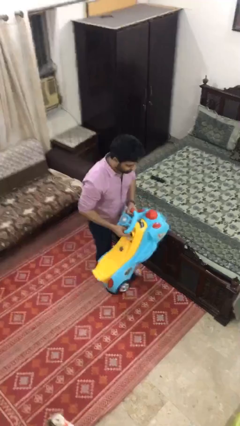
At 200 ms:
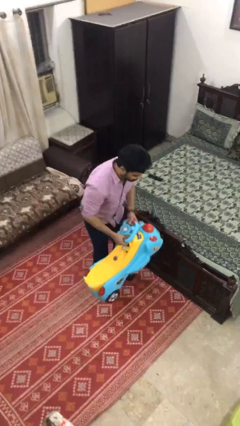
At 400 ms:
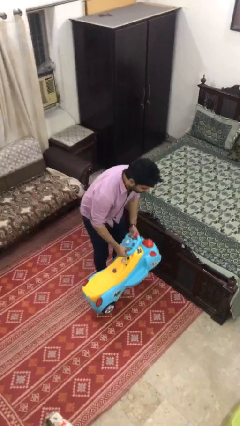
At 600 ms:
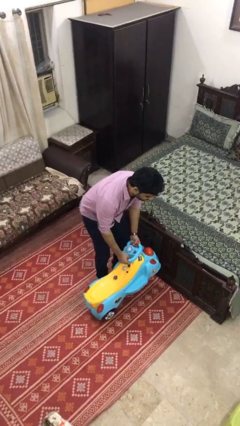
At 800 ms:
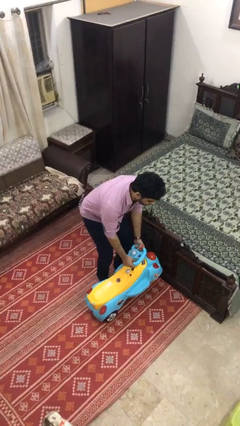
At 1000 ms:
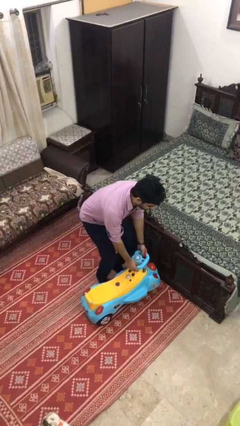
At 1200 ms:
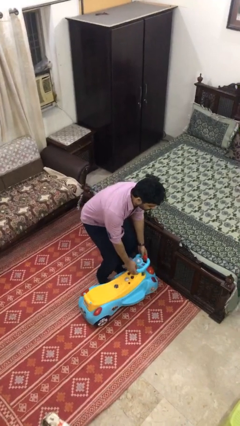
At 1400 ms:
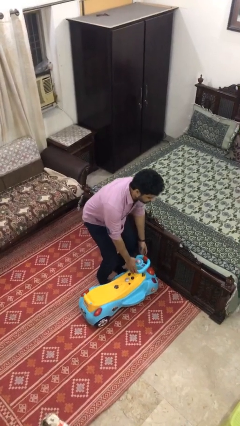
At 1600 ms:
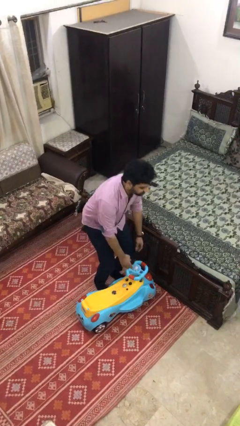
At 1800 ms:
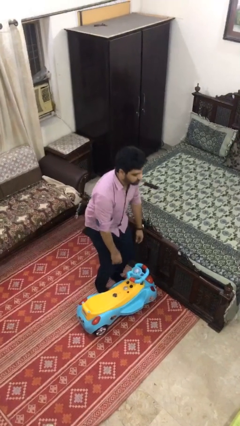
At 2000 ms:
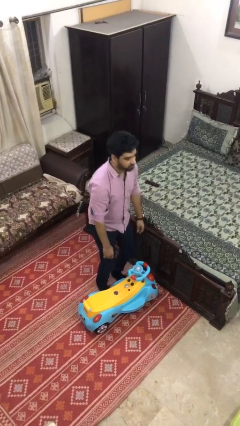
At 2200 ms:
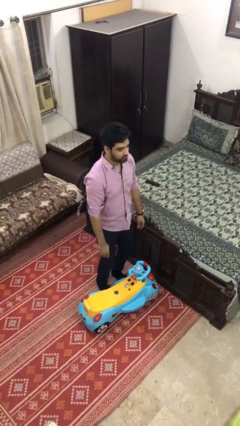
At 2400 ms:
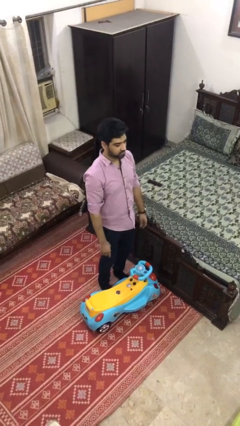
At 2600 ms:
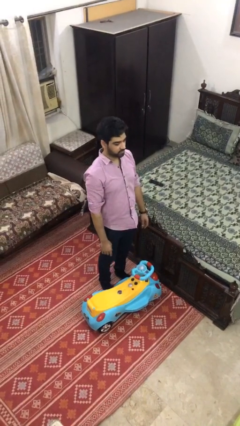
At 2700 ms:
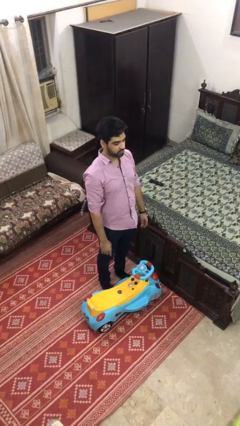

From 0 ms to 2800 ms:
person puts down object on floor

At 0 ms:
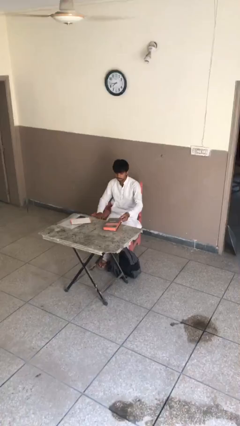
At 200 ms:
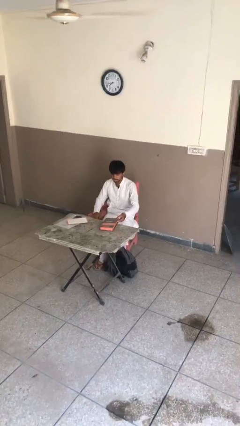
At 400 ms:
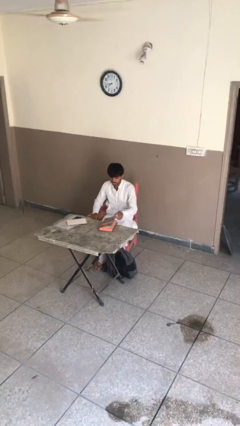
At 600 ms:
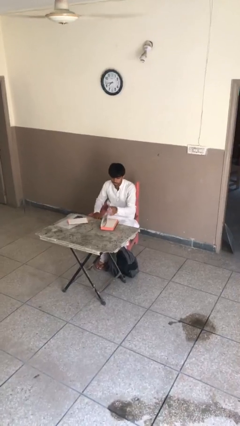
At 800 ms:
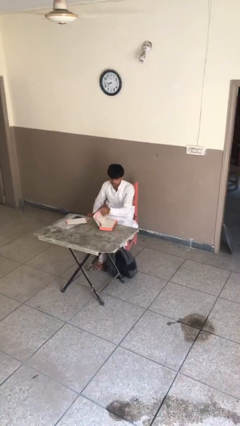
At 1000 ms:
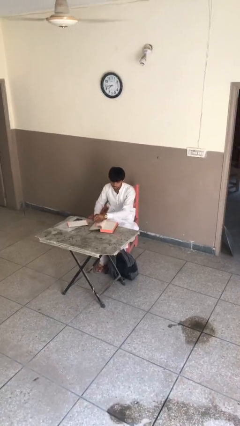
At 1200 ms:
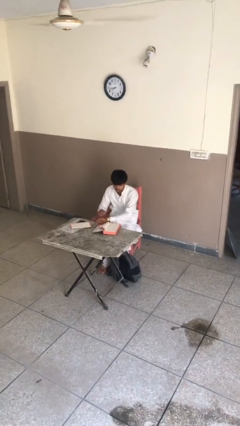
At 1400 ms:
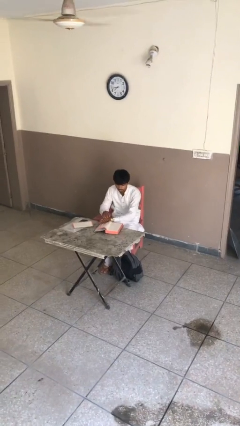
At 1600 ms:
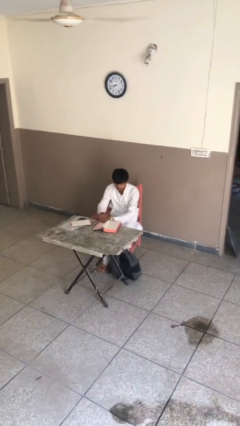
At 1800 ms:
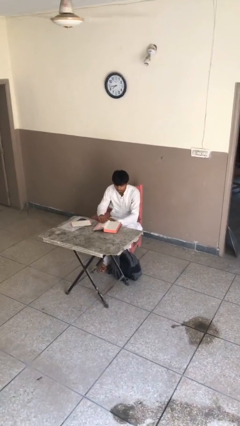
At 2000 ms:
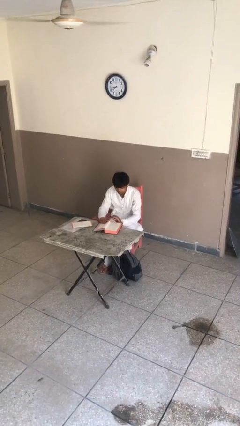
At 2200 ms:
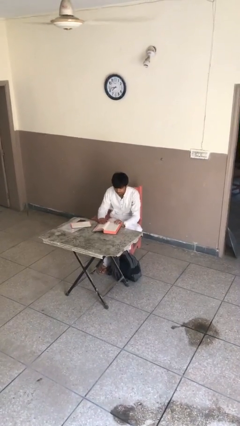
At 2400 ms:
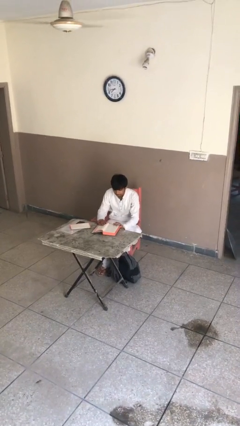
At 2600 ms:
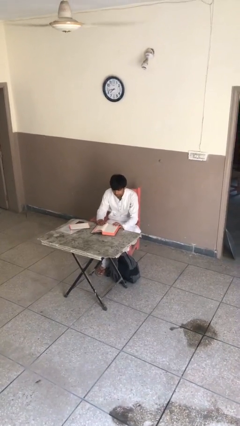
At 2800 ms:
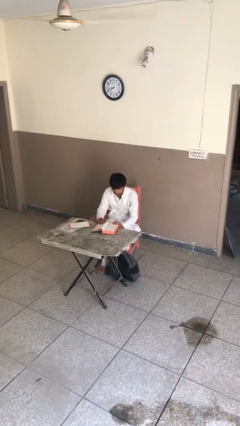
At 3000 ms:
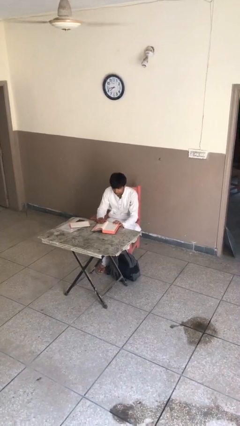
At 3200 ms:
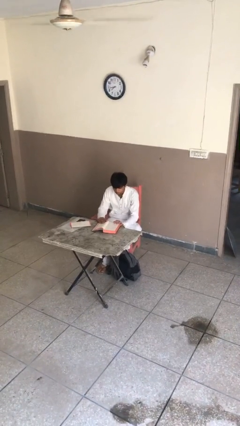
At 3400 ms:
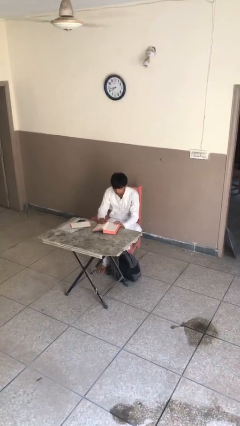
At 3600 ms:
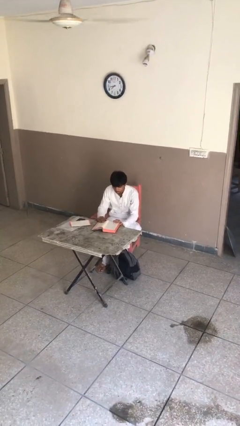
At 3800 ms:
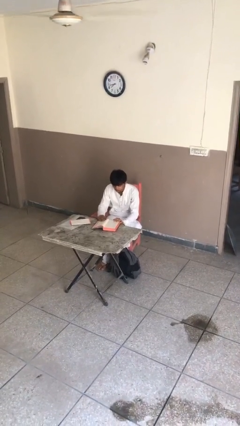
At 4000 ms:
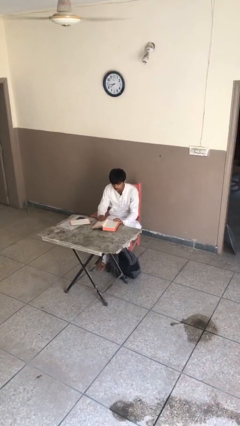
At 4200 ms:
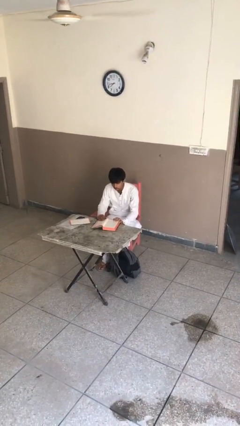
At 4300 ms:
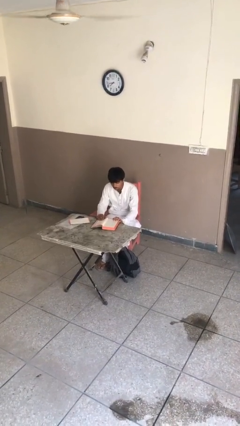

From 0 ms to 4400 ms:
person reads document

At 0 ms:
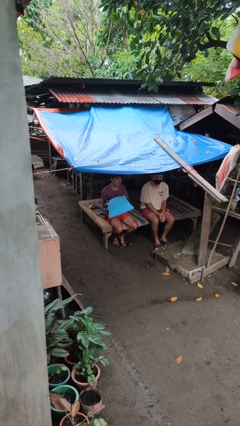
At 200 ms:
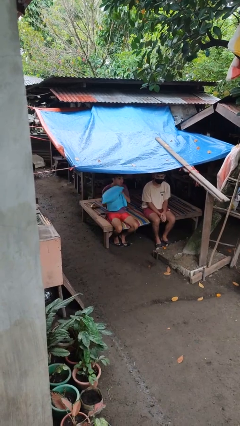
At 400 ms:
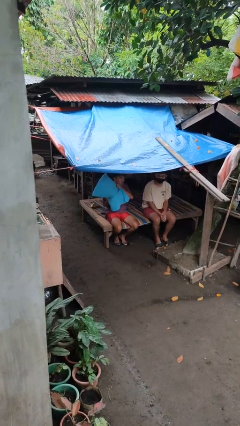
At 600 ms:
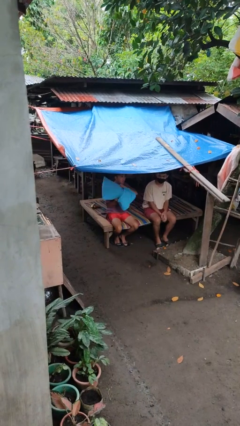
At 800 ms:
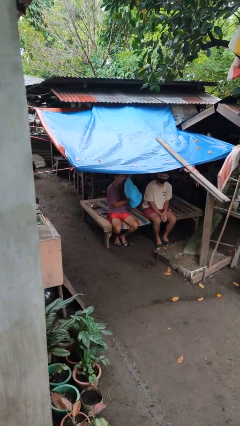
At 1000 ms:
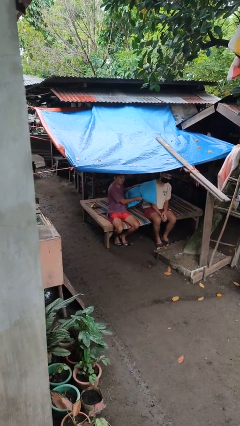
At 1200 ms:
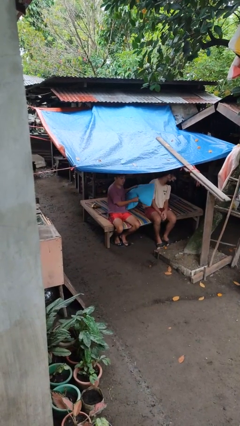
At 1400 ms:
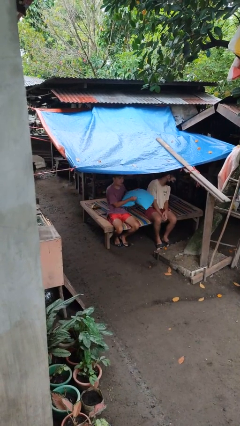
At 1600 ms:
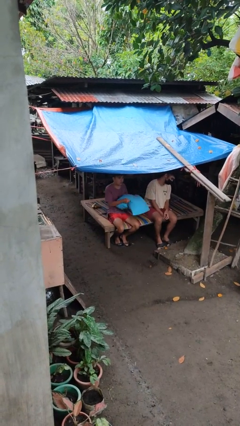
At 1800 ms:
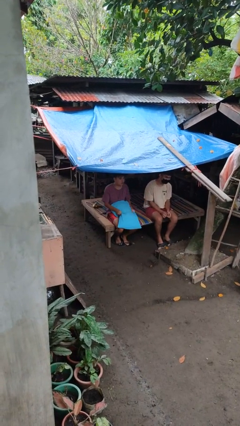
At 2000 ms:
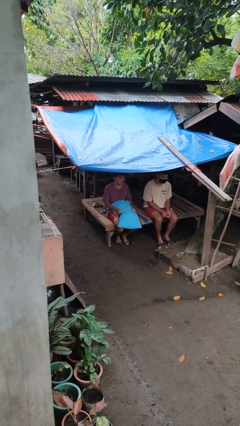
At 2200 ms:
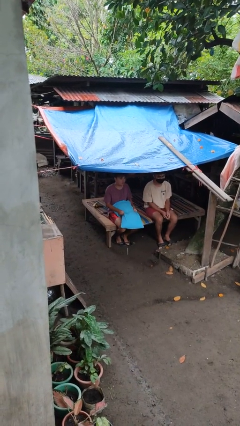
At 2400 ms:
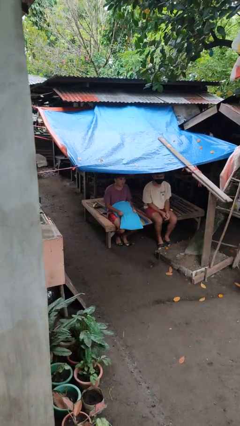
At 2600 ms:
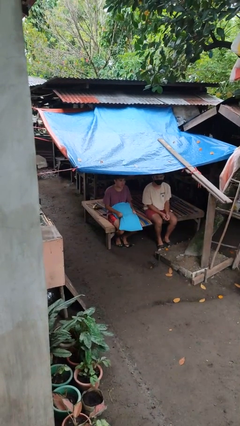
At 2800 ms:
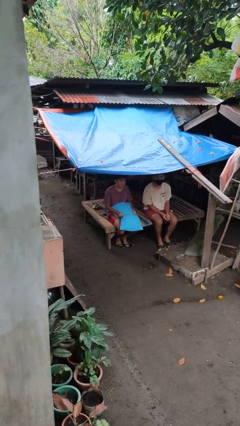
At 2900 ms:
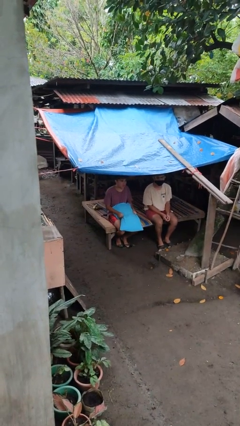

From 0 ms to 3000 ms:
person hits person with pillow

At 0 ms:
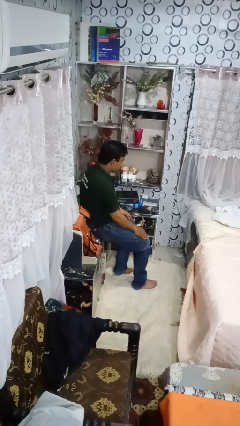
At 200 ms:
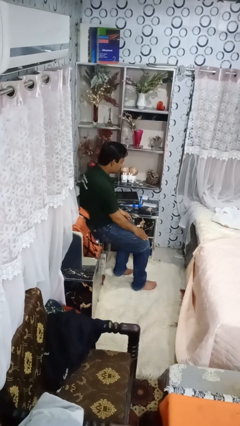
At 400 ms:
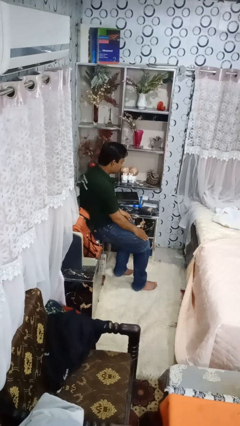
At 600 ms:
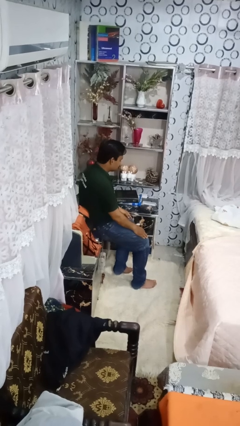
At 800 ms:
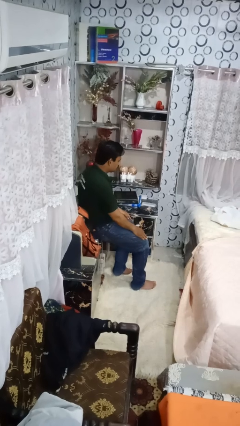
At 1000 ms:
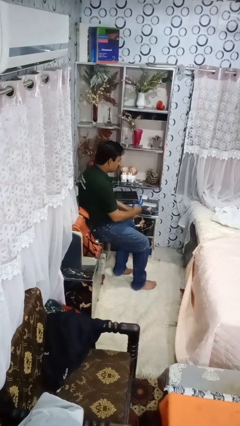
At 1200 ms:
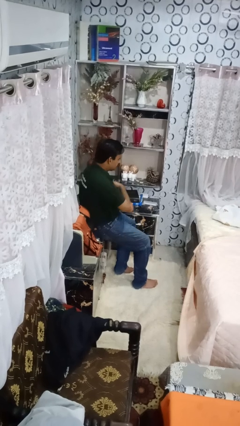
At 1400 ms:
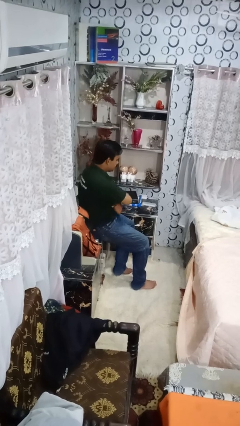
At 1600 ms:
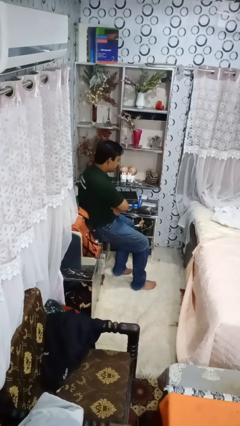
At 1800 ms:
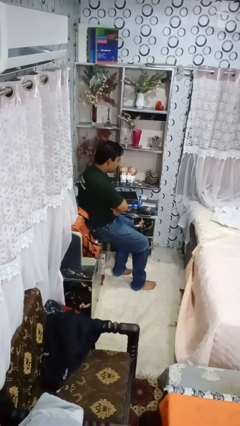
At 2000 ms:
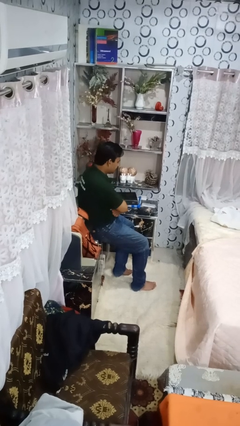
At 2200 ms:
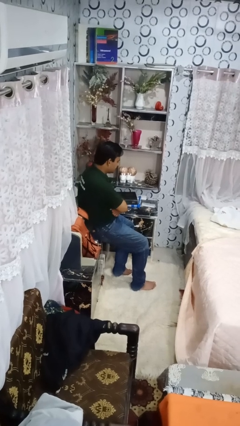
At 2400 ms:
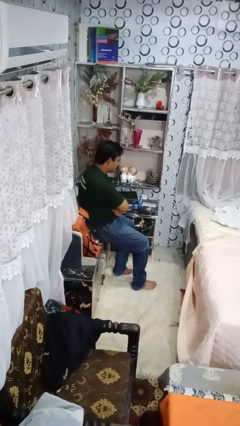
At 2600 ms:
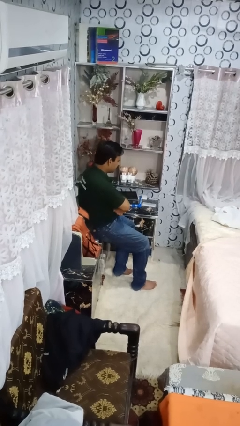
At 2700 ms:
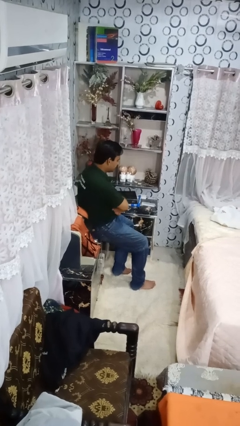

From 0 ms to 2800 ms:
person crosses arms

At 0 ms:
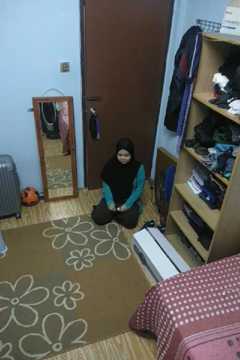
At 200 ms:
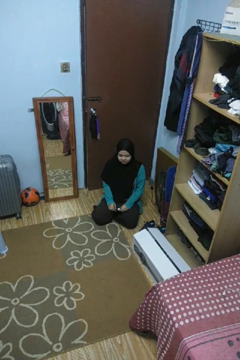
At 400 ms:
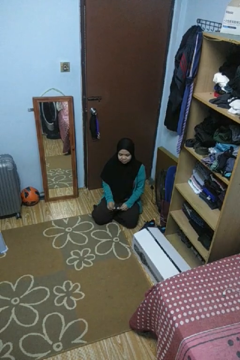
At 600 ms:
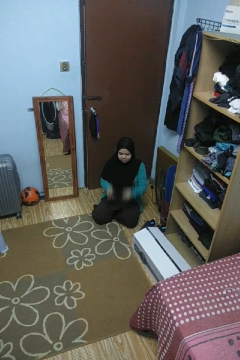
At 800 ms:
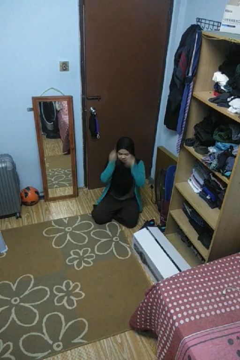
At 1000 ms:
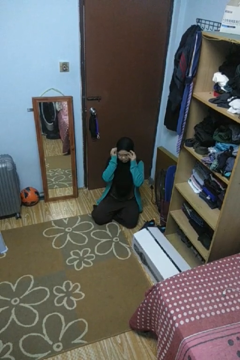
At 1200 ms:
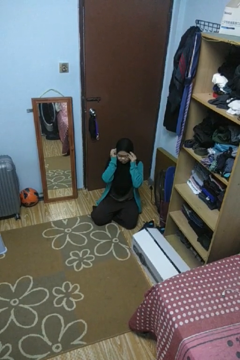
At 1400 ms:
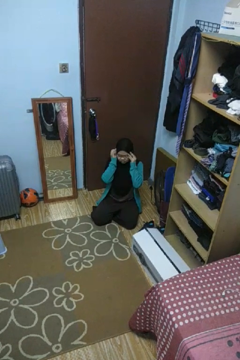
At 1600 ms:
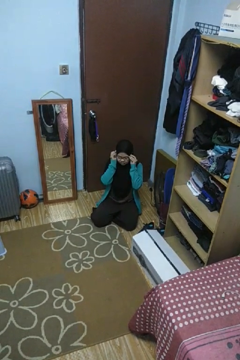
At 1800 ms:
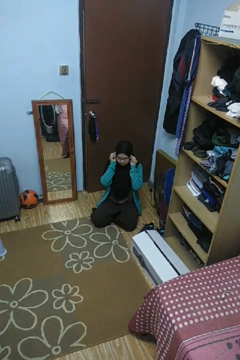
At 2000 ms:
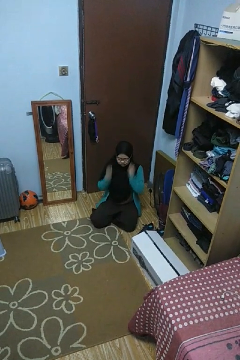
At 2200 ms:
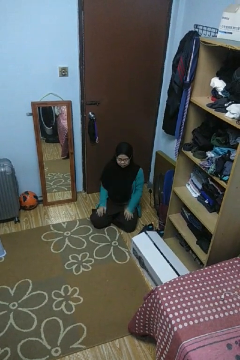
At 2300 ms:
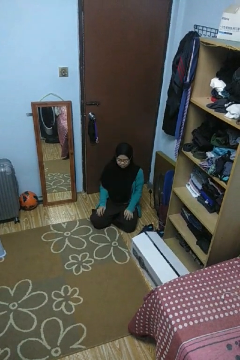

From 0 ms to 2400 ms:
person puts on glasses

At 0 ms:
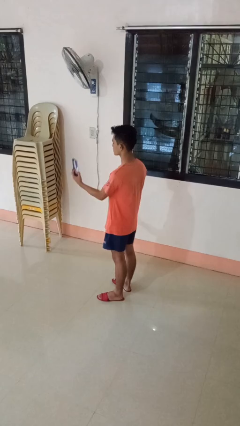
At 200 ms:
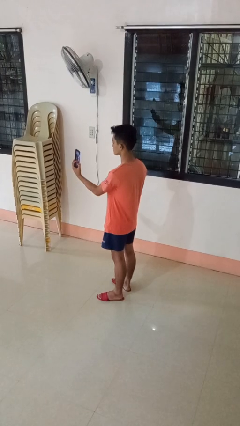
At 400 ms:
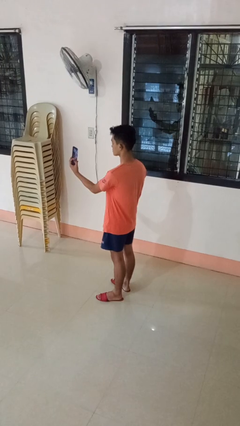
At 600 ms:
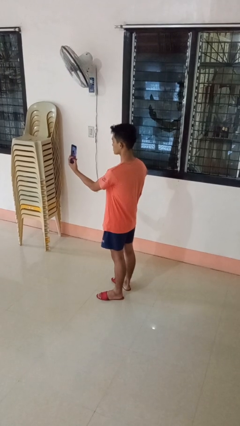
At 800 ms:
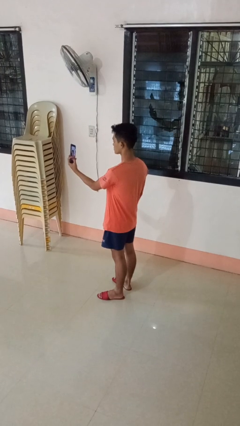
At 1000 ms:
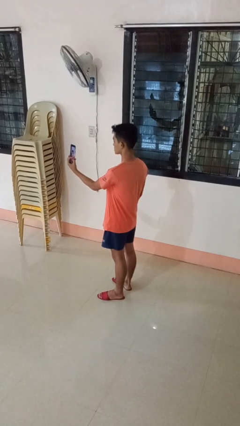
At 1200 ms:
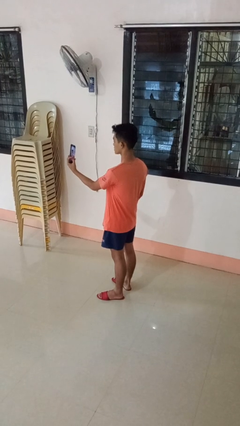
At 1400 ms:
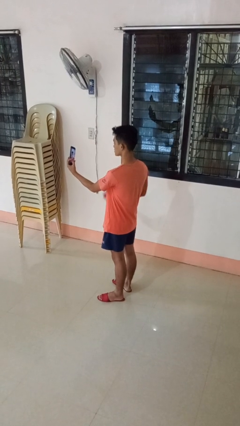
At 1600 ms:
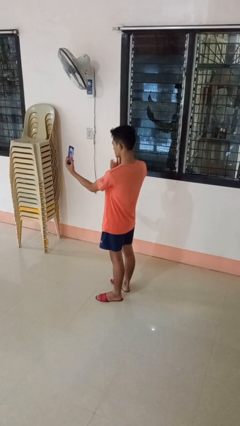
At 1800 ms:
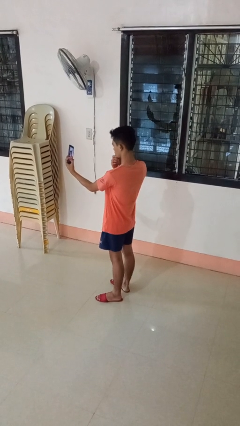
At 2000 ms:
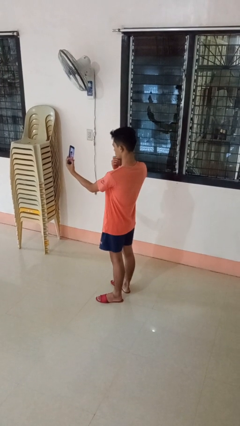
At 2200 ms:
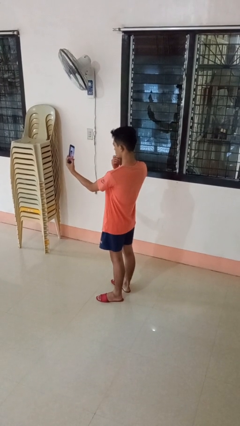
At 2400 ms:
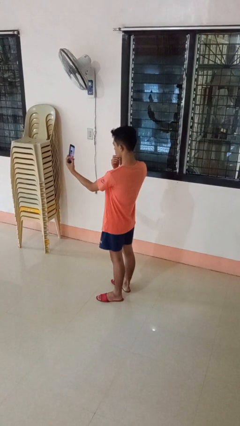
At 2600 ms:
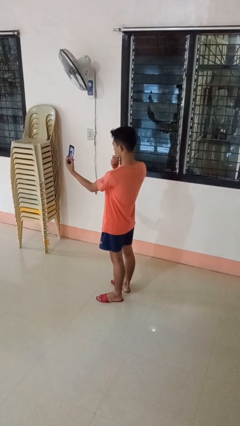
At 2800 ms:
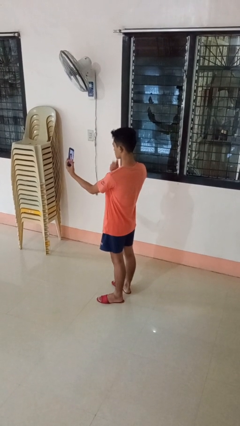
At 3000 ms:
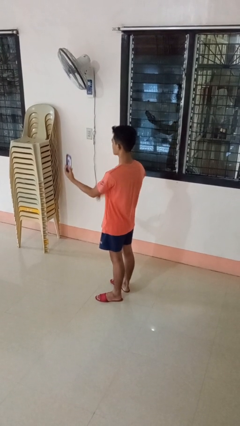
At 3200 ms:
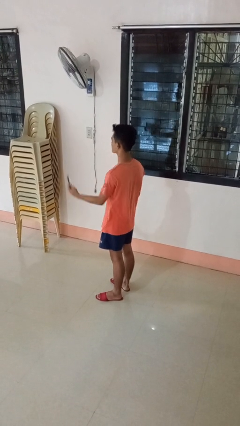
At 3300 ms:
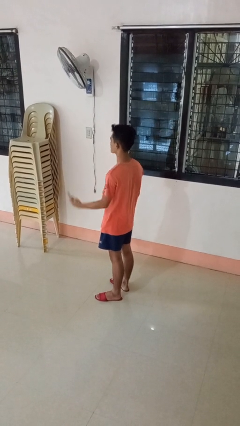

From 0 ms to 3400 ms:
person takes selfie
